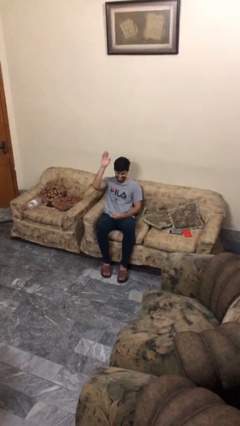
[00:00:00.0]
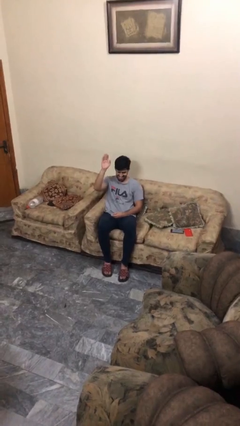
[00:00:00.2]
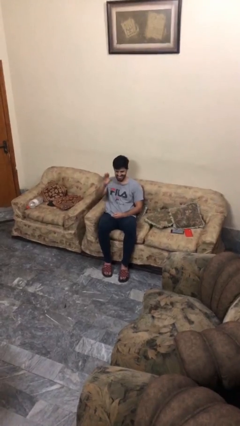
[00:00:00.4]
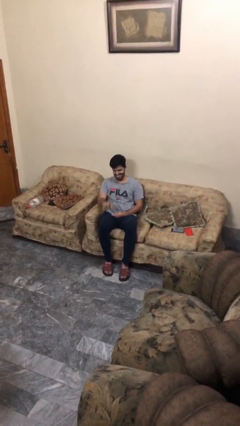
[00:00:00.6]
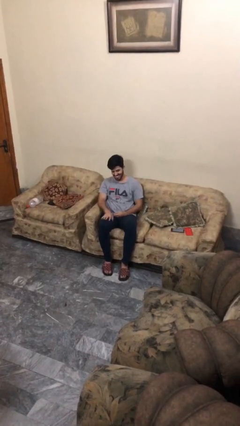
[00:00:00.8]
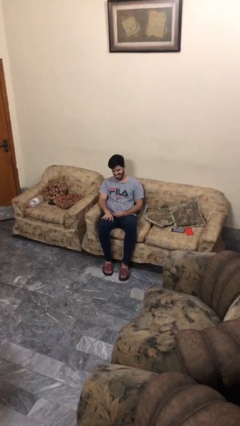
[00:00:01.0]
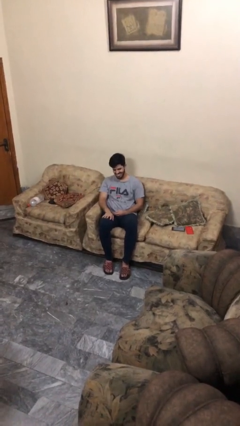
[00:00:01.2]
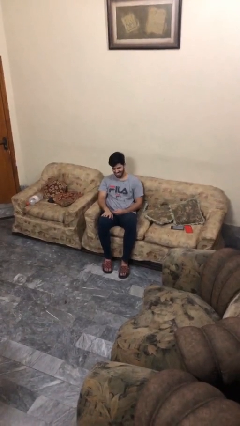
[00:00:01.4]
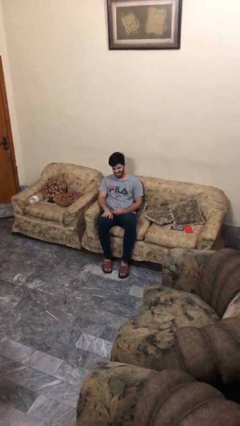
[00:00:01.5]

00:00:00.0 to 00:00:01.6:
person gestures lower hand

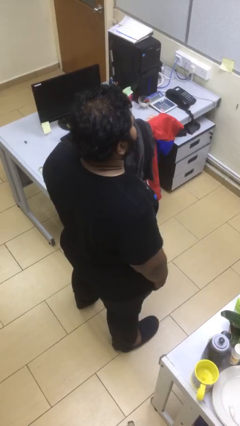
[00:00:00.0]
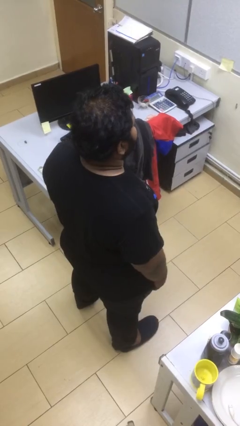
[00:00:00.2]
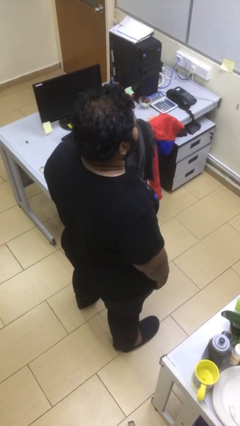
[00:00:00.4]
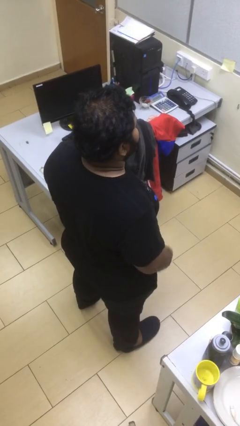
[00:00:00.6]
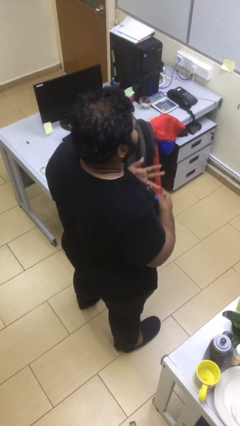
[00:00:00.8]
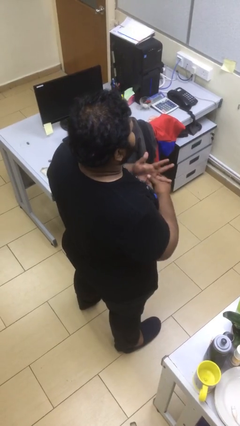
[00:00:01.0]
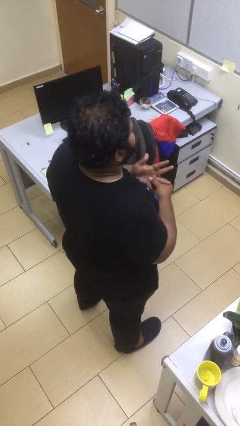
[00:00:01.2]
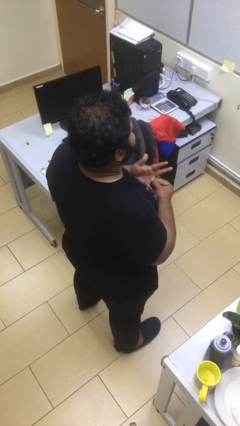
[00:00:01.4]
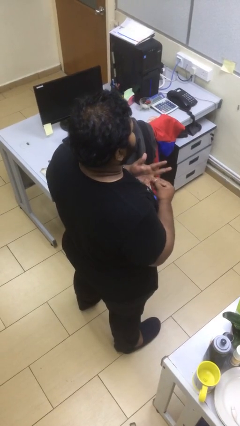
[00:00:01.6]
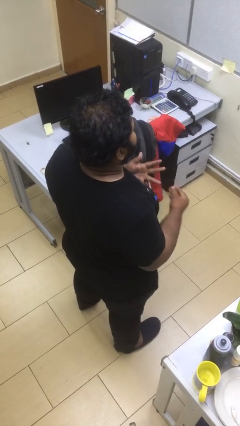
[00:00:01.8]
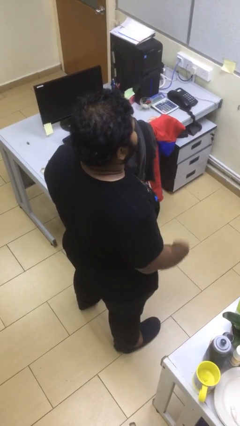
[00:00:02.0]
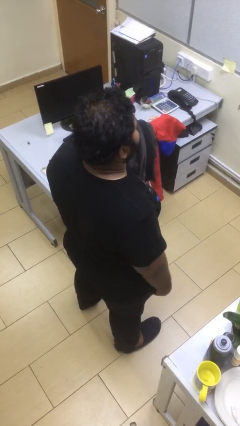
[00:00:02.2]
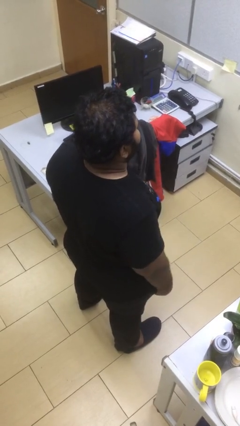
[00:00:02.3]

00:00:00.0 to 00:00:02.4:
person takes off ring

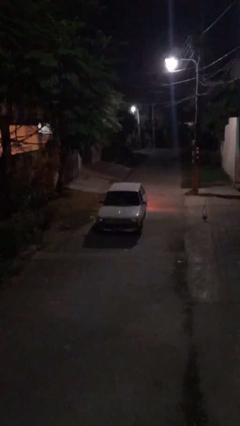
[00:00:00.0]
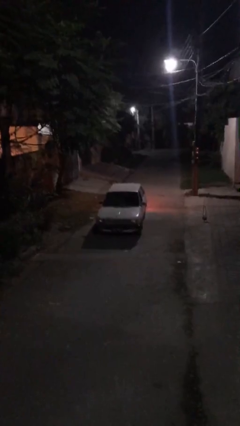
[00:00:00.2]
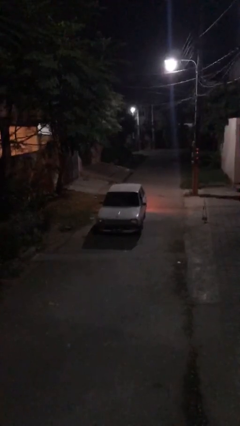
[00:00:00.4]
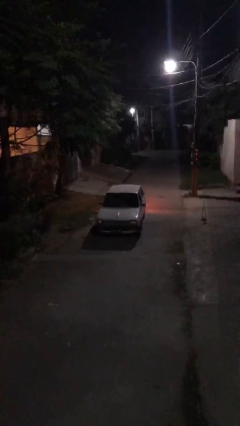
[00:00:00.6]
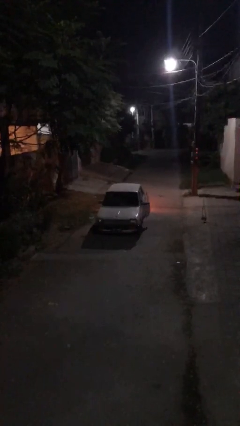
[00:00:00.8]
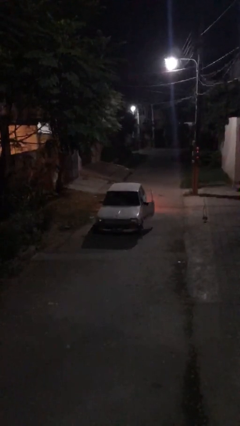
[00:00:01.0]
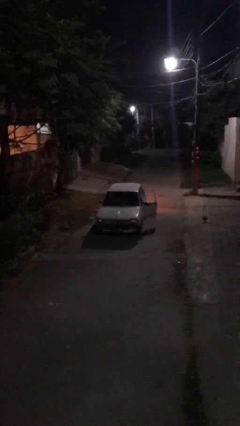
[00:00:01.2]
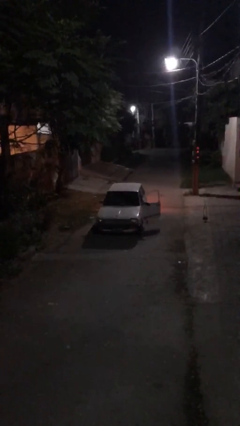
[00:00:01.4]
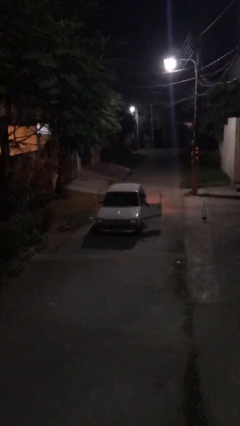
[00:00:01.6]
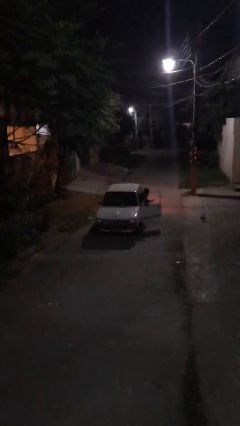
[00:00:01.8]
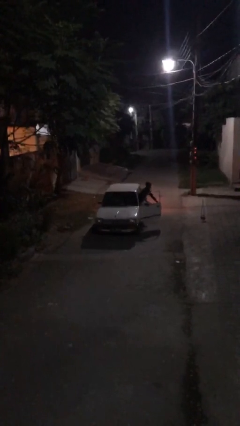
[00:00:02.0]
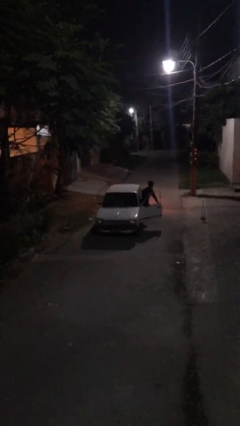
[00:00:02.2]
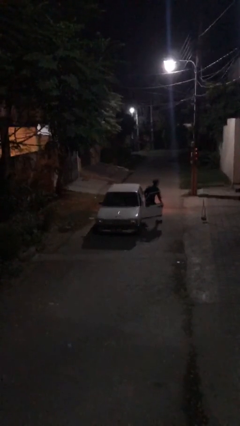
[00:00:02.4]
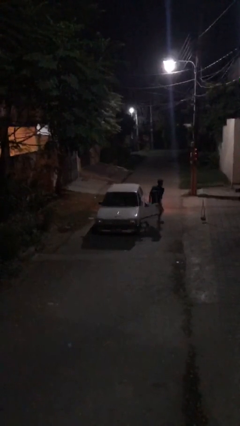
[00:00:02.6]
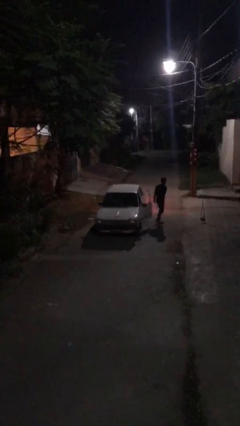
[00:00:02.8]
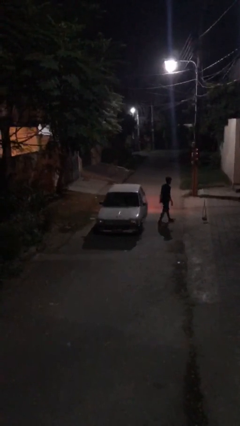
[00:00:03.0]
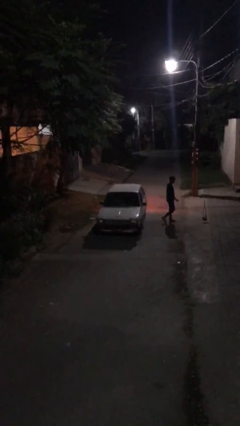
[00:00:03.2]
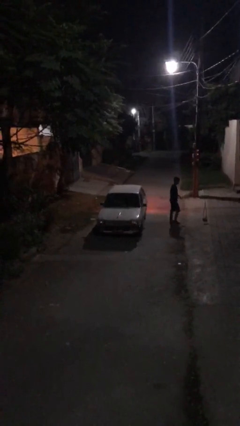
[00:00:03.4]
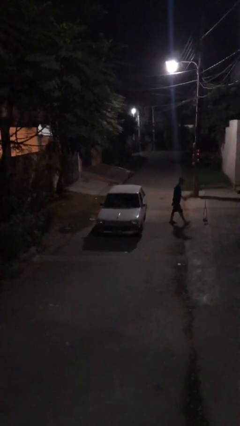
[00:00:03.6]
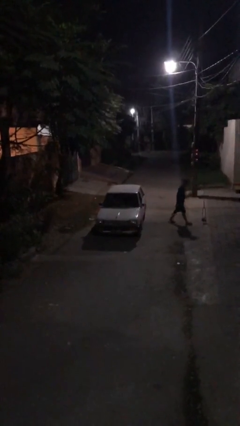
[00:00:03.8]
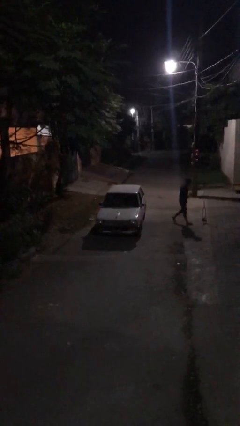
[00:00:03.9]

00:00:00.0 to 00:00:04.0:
car drops off person

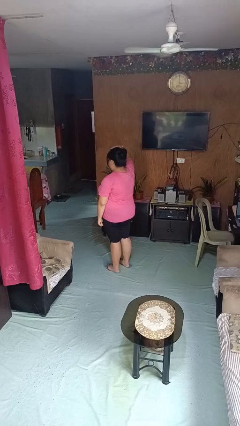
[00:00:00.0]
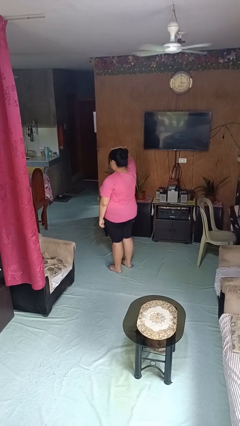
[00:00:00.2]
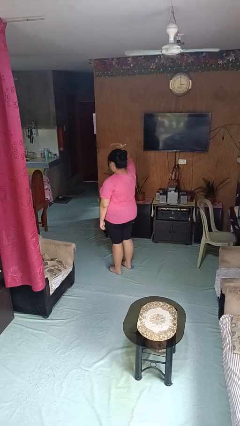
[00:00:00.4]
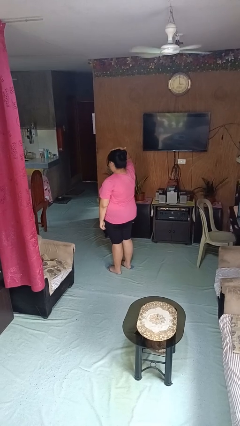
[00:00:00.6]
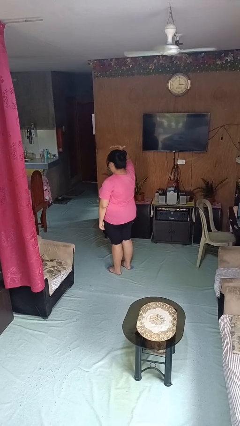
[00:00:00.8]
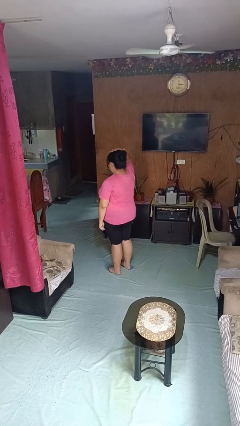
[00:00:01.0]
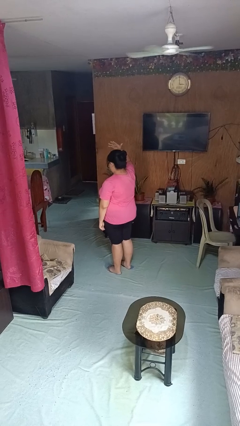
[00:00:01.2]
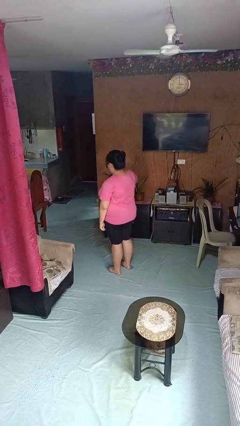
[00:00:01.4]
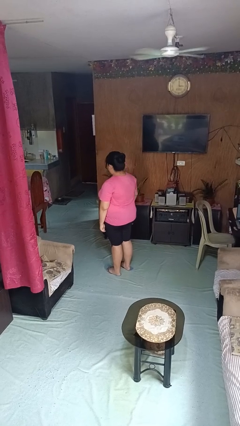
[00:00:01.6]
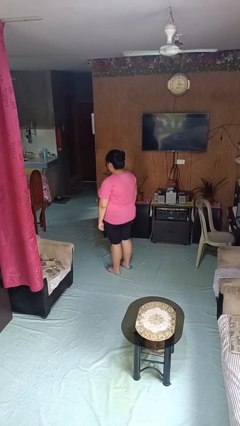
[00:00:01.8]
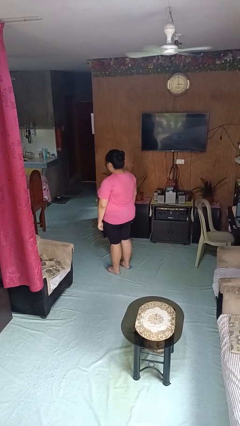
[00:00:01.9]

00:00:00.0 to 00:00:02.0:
person pats head

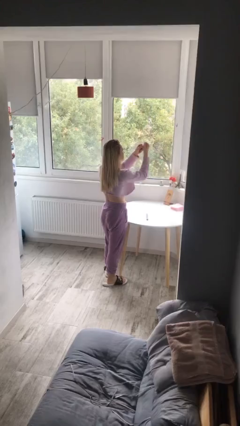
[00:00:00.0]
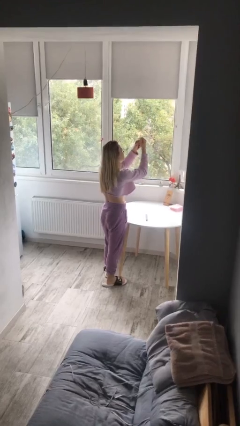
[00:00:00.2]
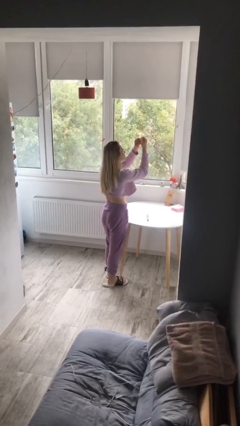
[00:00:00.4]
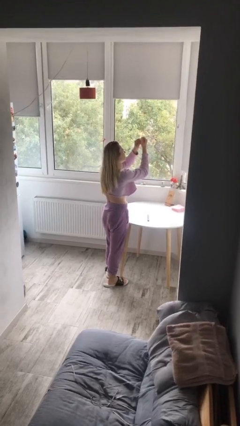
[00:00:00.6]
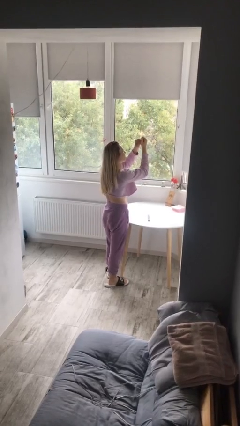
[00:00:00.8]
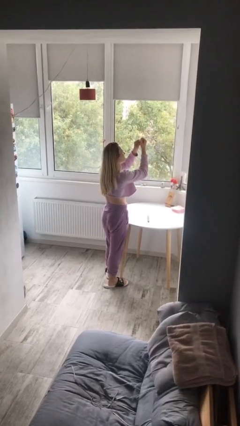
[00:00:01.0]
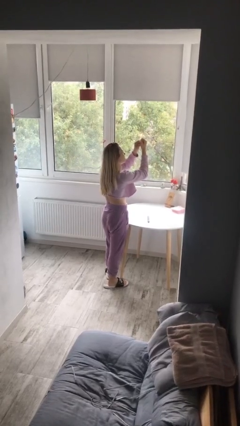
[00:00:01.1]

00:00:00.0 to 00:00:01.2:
person clips fingernails

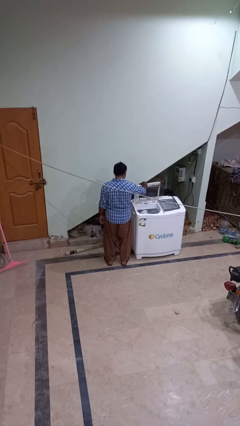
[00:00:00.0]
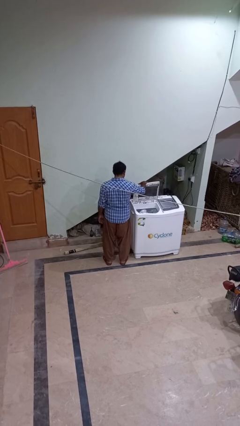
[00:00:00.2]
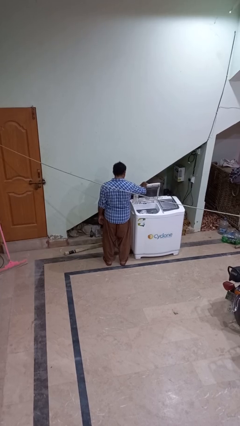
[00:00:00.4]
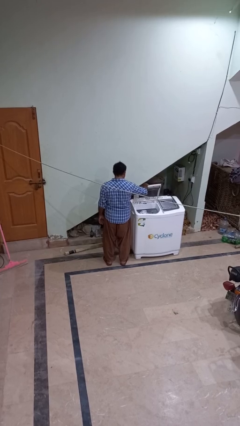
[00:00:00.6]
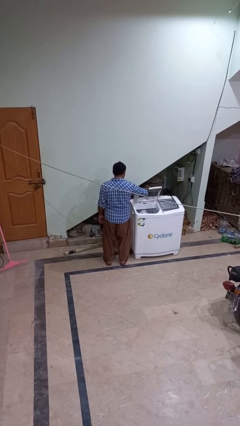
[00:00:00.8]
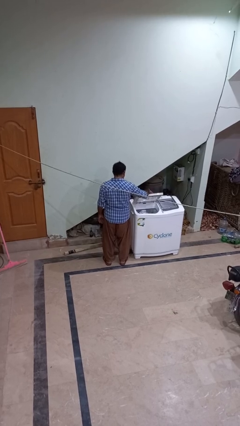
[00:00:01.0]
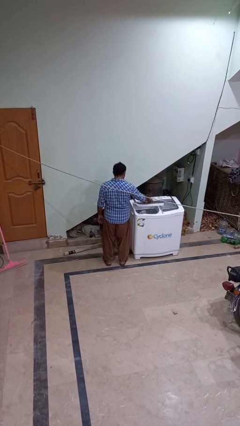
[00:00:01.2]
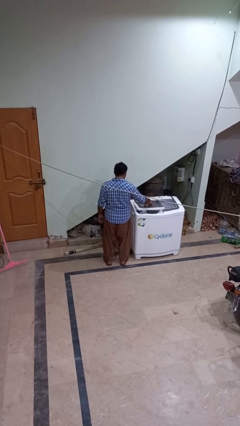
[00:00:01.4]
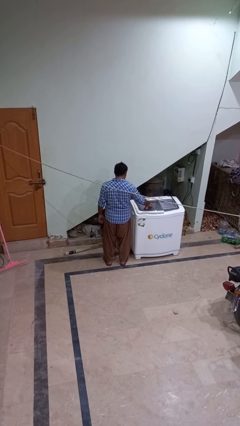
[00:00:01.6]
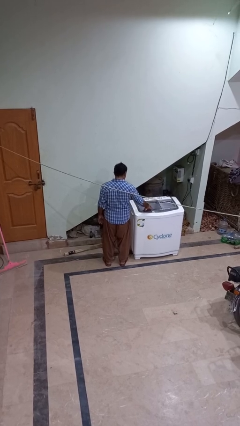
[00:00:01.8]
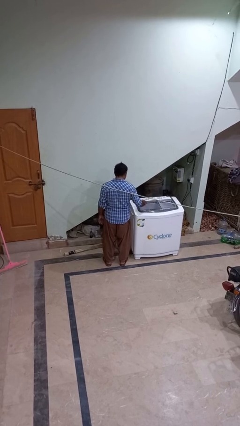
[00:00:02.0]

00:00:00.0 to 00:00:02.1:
person closes clothes washer

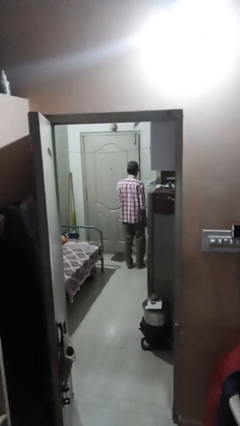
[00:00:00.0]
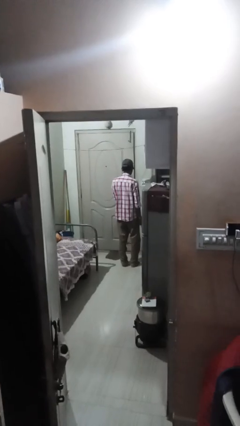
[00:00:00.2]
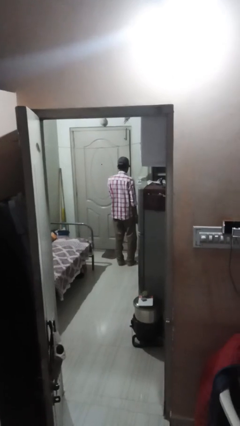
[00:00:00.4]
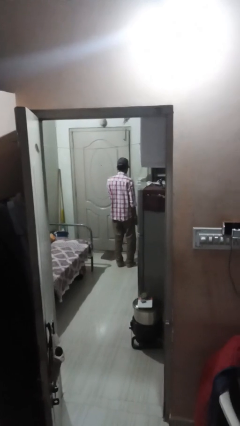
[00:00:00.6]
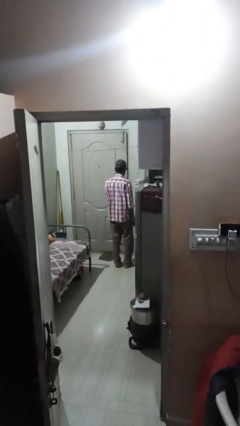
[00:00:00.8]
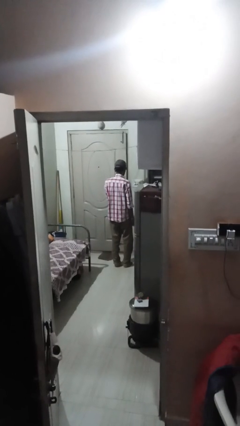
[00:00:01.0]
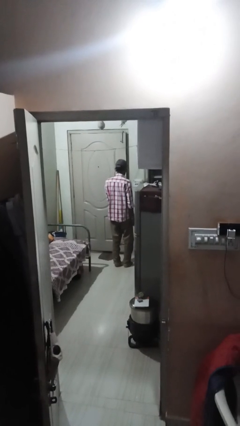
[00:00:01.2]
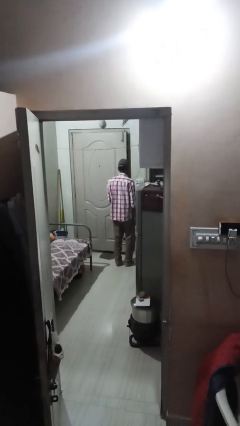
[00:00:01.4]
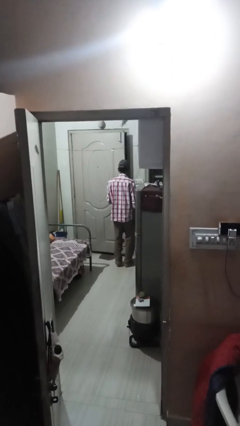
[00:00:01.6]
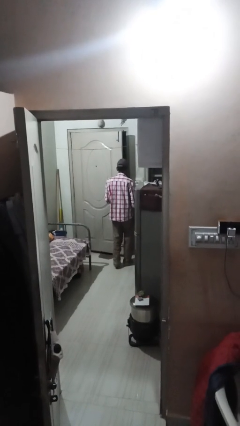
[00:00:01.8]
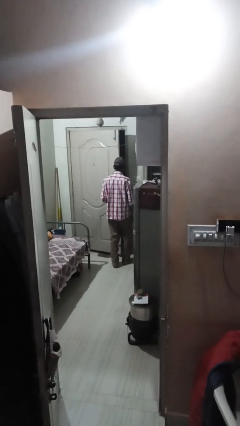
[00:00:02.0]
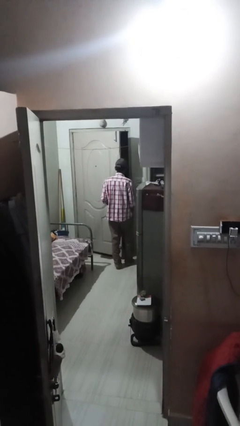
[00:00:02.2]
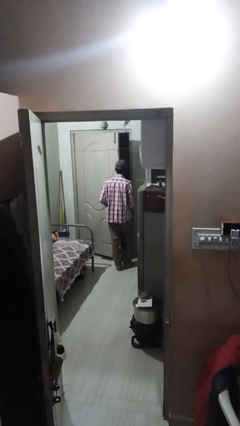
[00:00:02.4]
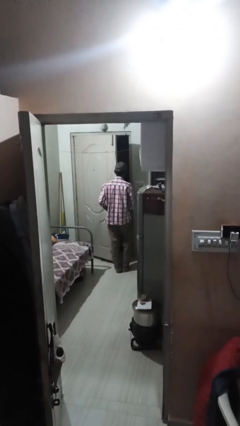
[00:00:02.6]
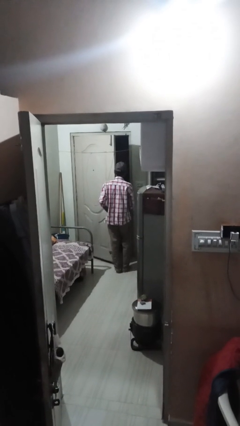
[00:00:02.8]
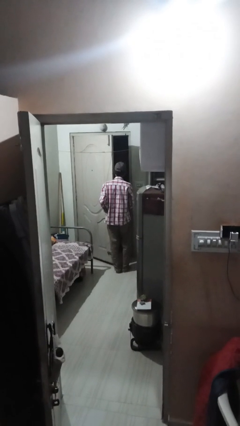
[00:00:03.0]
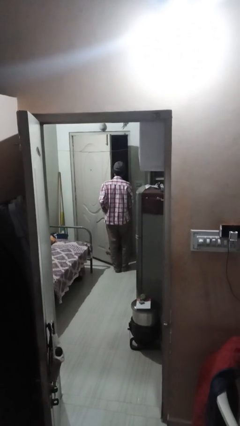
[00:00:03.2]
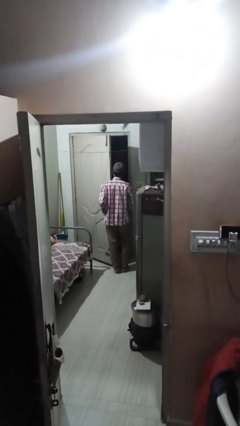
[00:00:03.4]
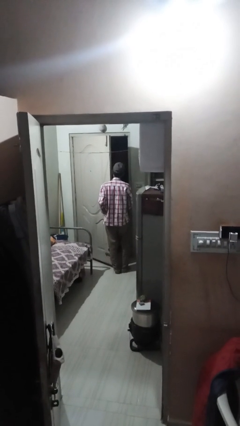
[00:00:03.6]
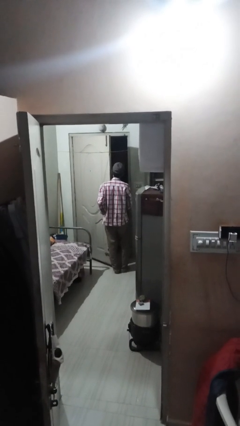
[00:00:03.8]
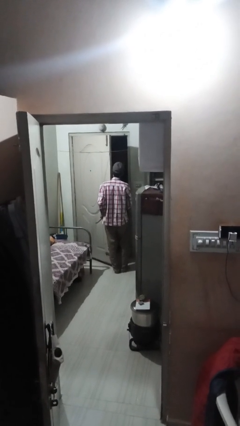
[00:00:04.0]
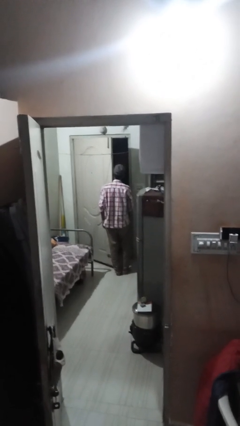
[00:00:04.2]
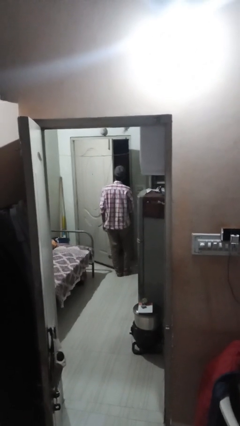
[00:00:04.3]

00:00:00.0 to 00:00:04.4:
person opens facility door
